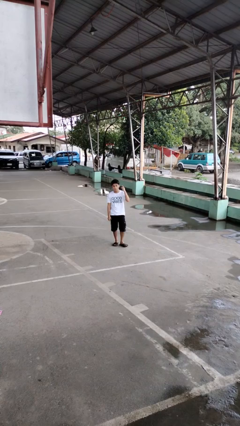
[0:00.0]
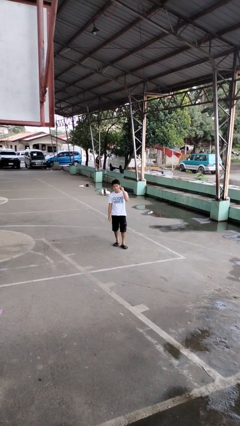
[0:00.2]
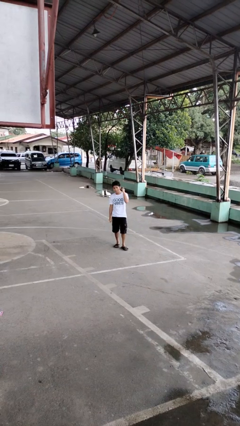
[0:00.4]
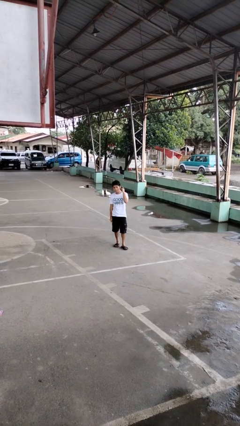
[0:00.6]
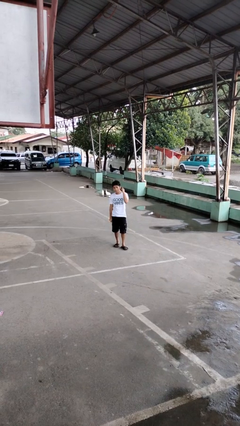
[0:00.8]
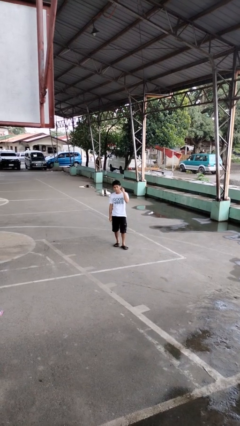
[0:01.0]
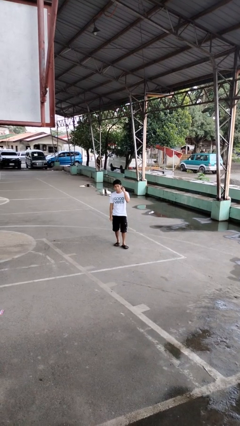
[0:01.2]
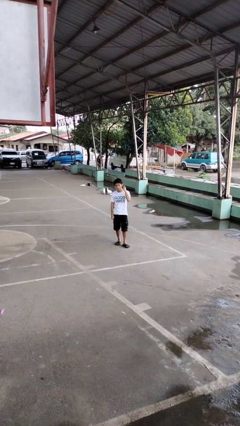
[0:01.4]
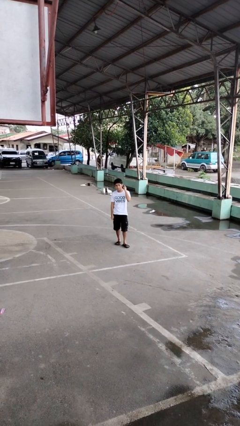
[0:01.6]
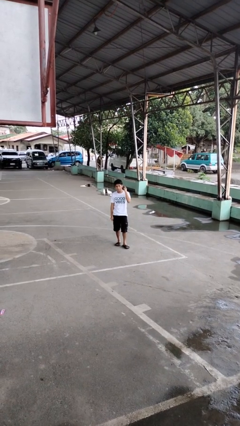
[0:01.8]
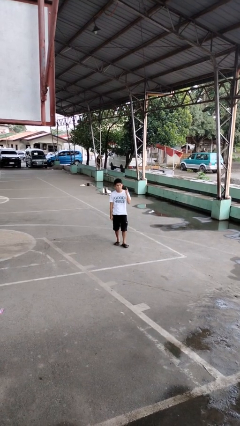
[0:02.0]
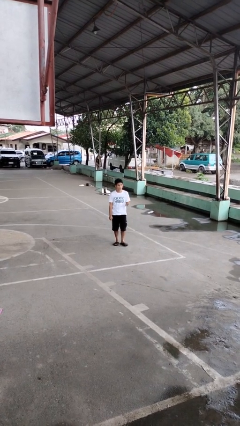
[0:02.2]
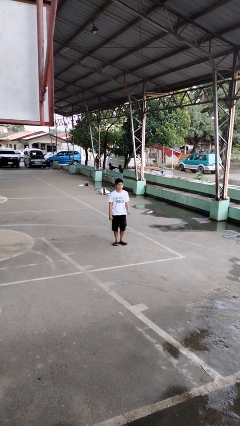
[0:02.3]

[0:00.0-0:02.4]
person gestures listen closely

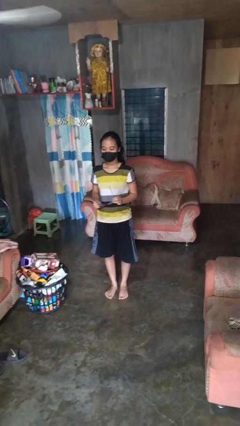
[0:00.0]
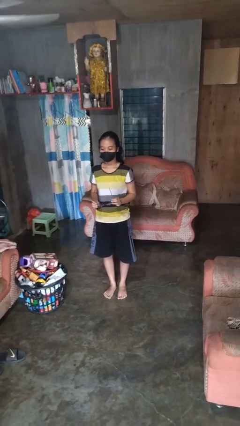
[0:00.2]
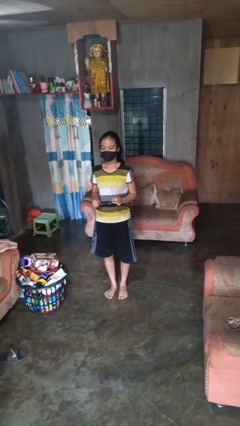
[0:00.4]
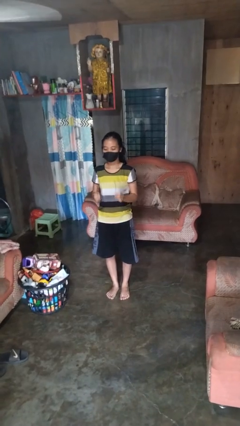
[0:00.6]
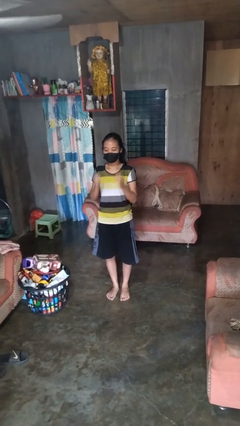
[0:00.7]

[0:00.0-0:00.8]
person puts on glasses

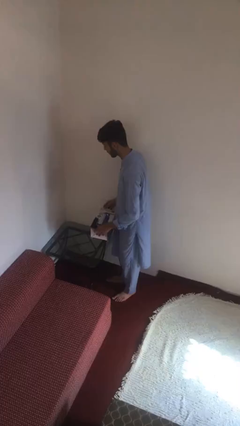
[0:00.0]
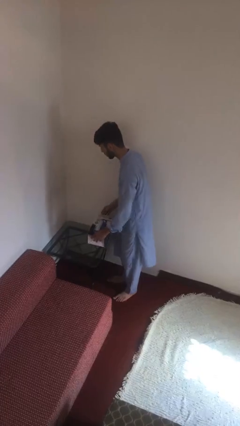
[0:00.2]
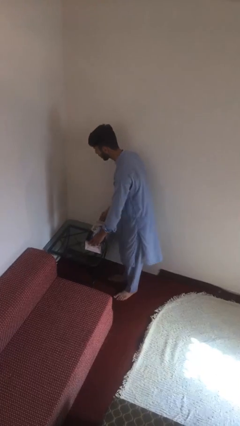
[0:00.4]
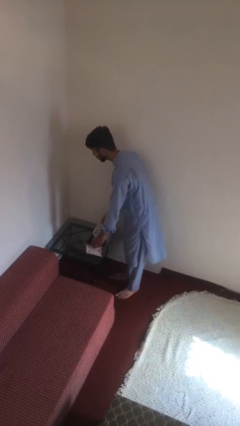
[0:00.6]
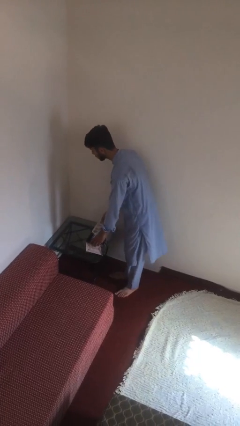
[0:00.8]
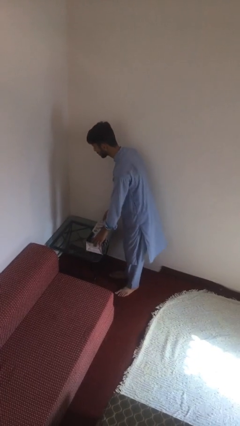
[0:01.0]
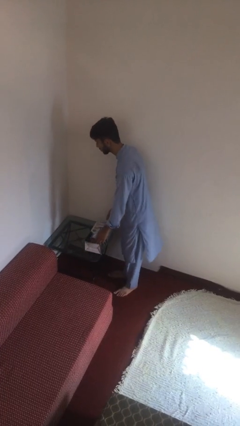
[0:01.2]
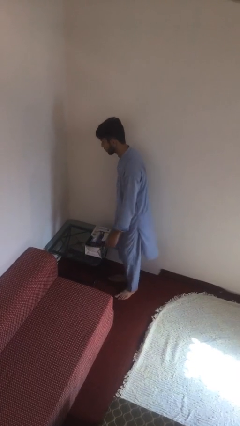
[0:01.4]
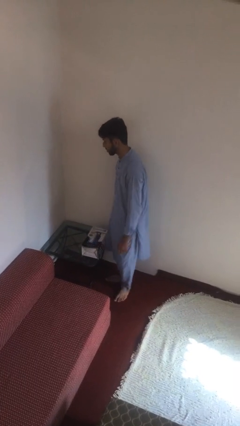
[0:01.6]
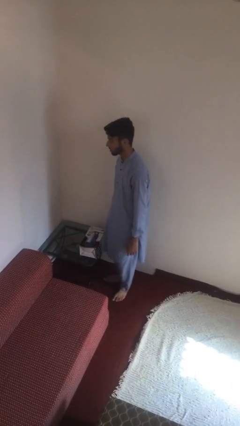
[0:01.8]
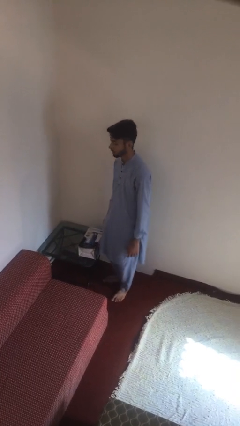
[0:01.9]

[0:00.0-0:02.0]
person puts down object on table

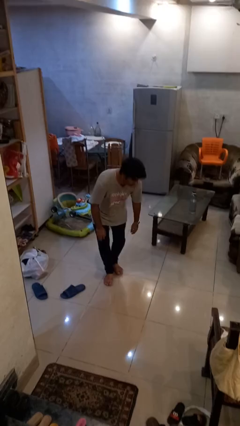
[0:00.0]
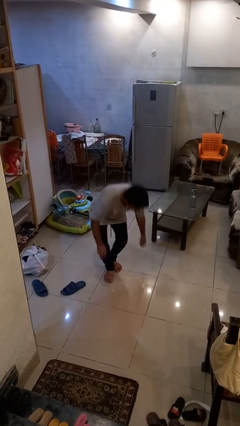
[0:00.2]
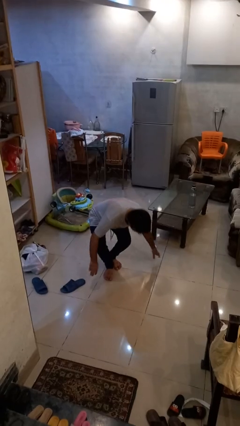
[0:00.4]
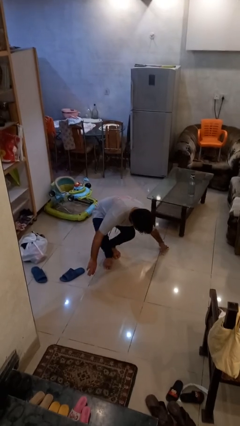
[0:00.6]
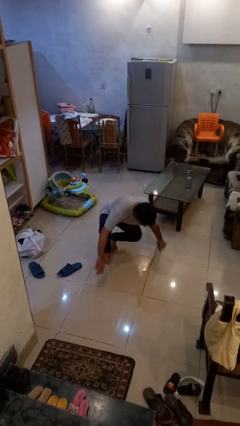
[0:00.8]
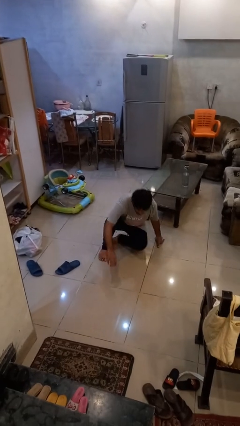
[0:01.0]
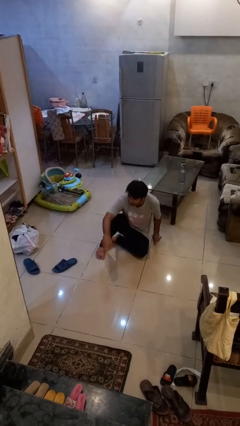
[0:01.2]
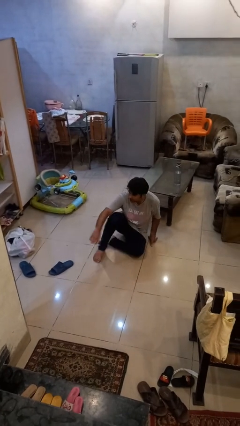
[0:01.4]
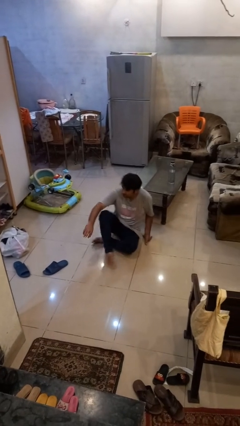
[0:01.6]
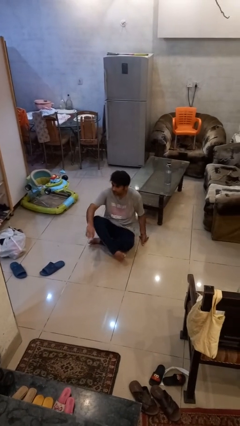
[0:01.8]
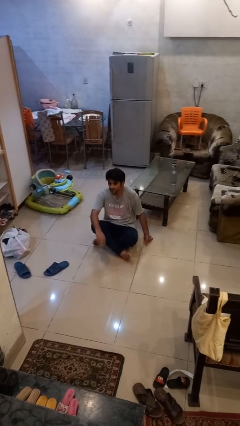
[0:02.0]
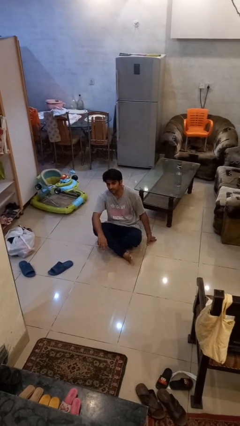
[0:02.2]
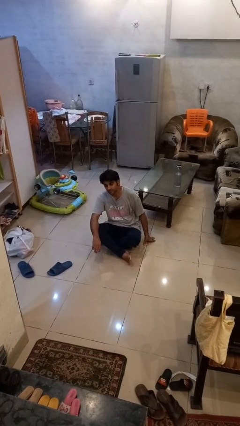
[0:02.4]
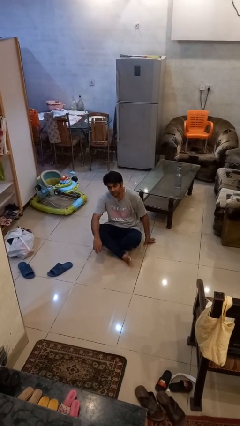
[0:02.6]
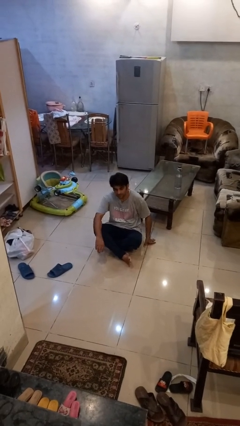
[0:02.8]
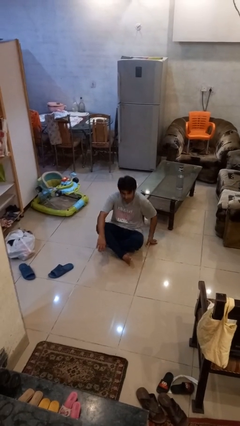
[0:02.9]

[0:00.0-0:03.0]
person sits crisscross

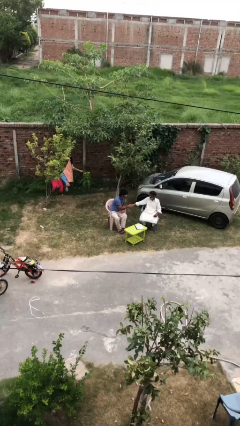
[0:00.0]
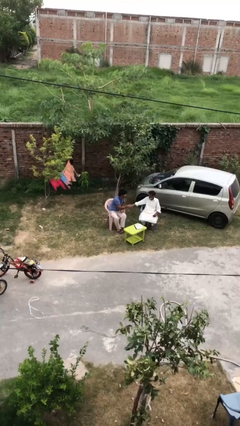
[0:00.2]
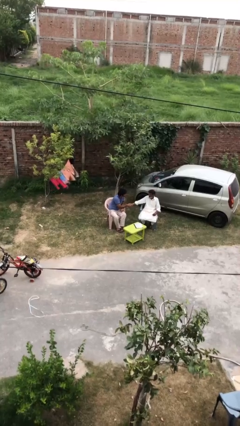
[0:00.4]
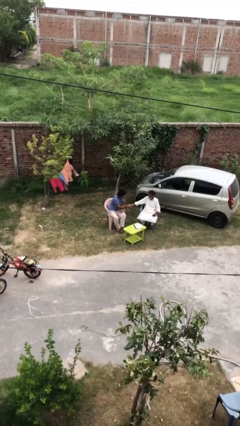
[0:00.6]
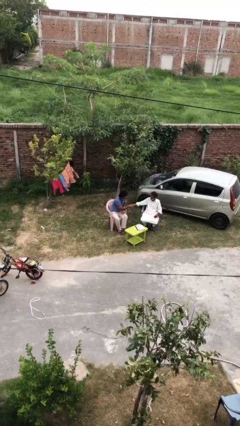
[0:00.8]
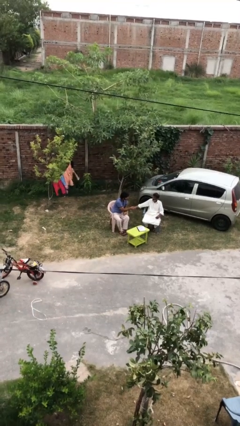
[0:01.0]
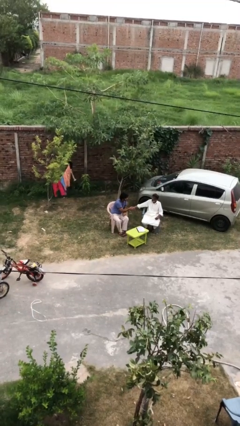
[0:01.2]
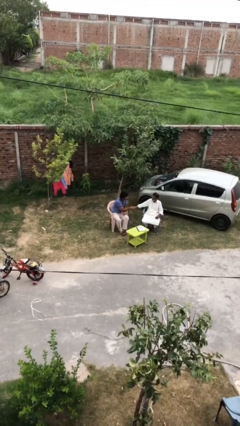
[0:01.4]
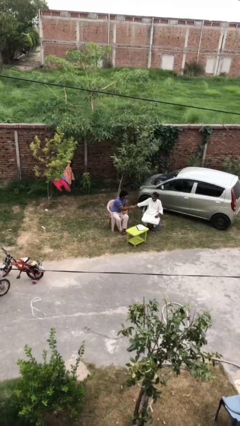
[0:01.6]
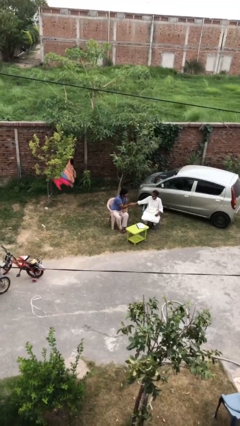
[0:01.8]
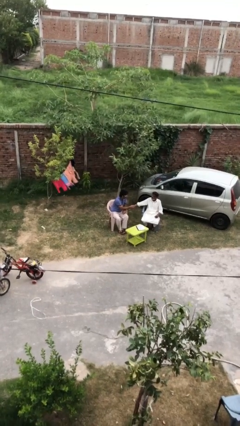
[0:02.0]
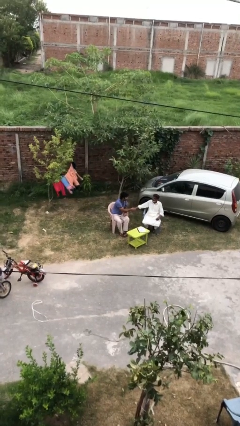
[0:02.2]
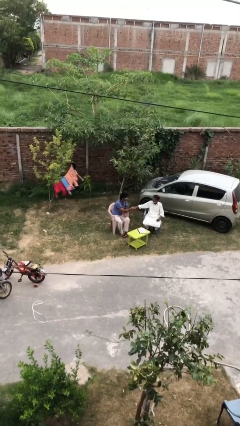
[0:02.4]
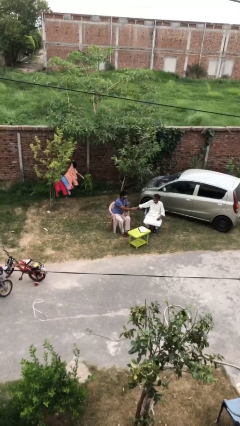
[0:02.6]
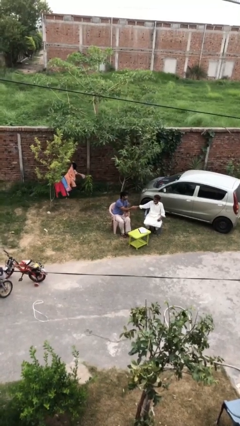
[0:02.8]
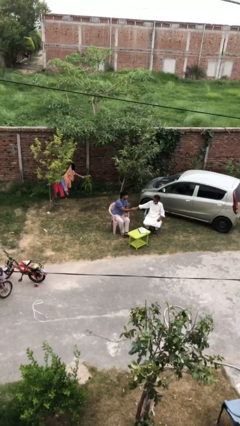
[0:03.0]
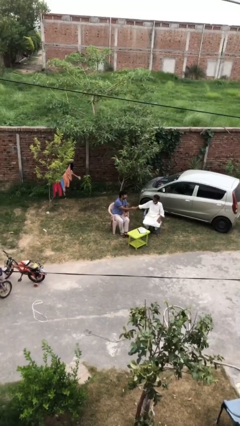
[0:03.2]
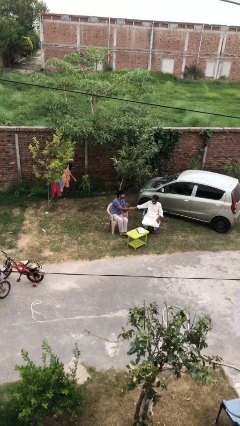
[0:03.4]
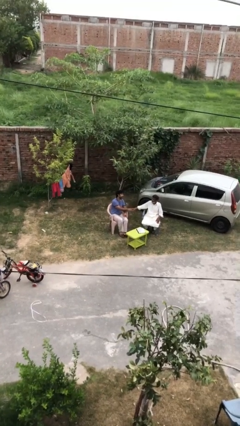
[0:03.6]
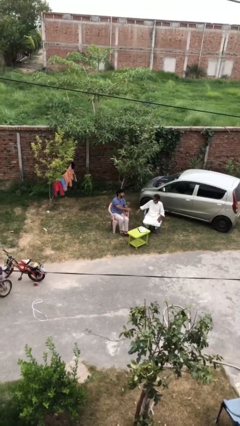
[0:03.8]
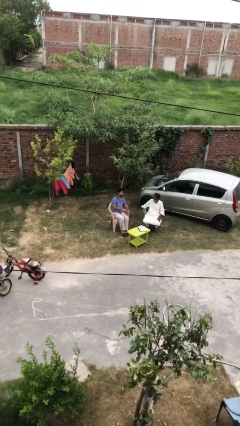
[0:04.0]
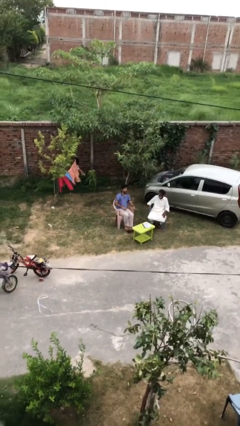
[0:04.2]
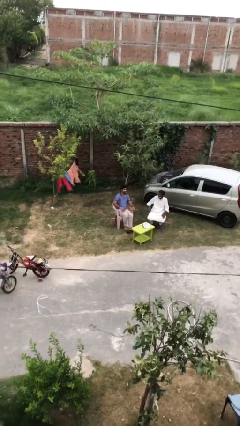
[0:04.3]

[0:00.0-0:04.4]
person shakes hand

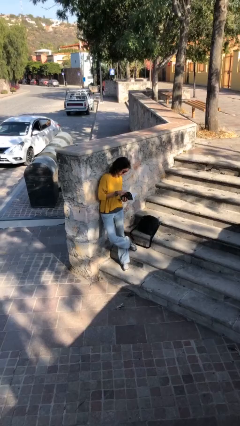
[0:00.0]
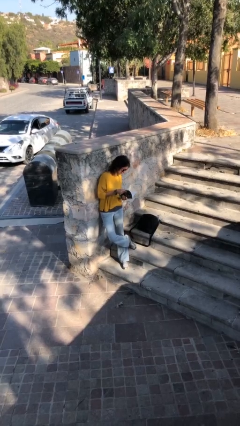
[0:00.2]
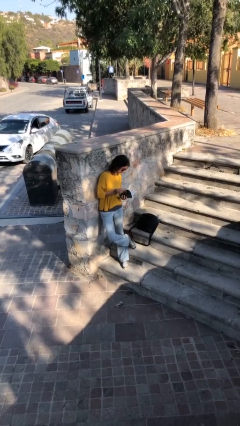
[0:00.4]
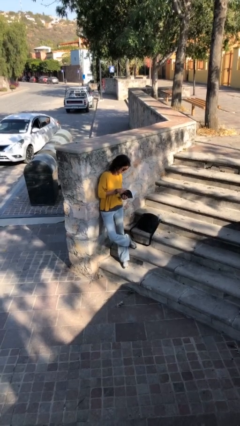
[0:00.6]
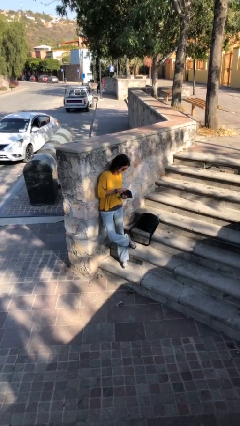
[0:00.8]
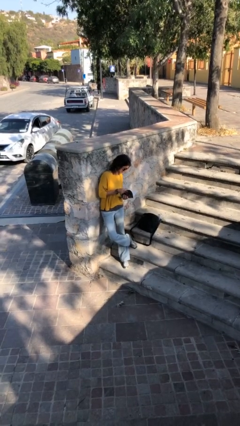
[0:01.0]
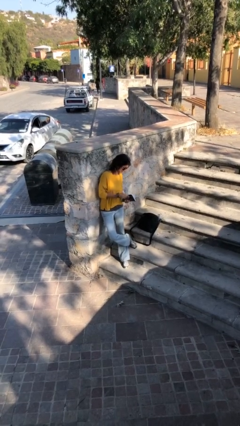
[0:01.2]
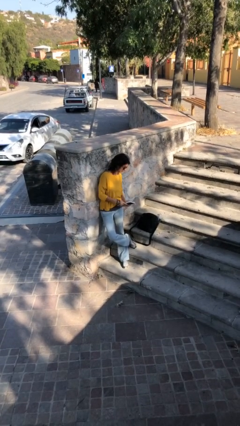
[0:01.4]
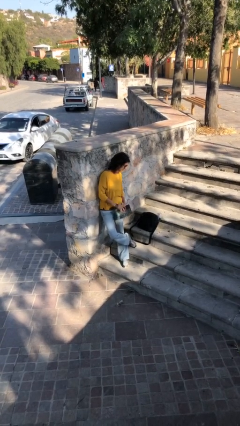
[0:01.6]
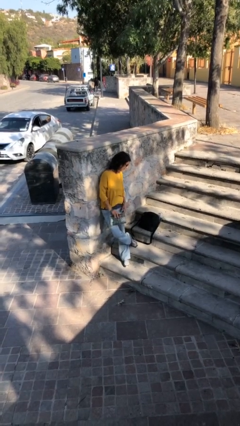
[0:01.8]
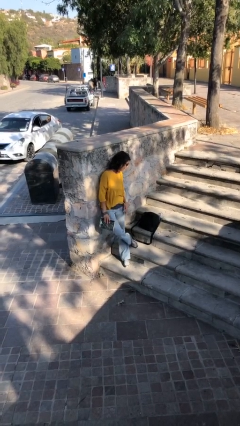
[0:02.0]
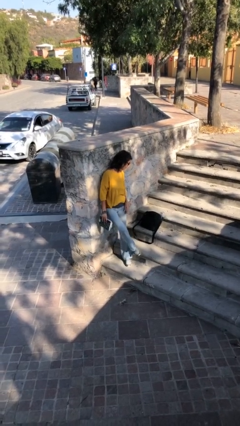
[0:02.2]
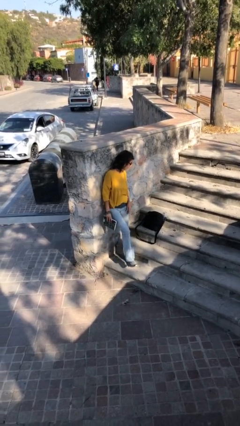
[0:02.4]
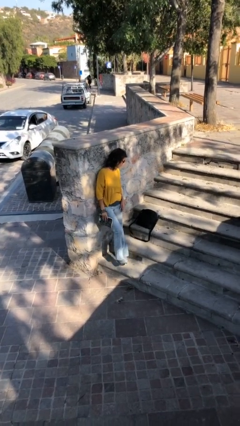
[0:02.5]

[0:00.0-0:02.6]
person reads document

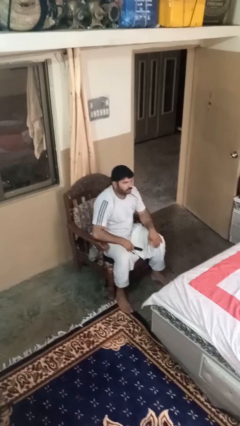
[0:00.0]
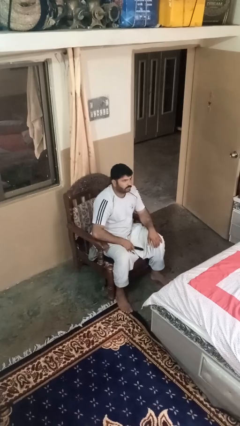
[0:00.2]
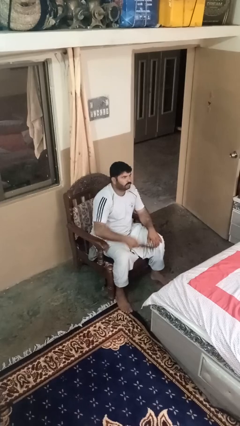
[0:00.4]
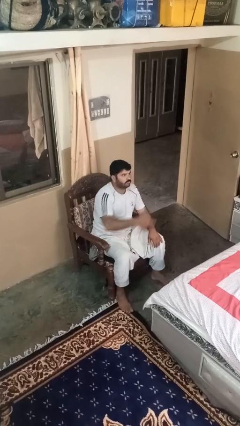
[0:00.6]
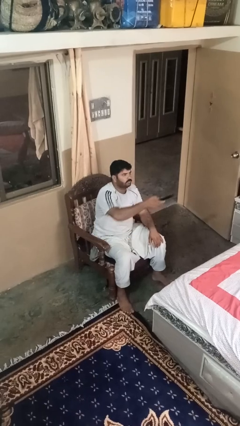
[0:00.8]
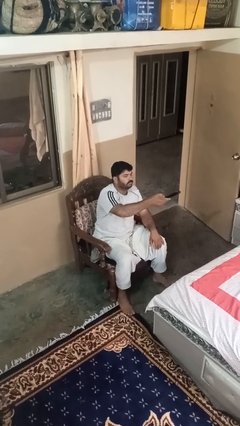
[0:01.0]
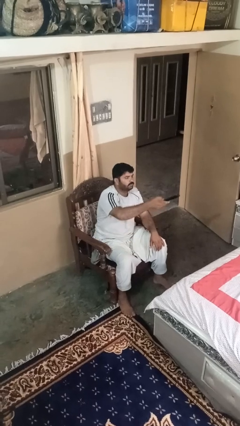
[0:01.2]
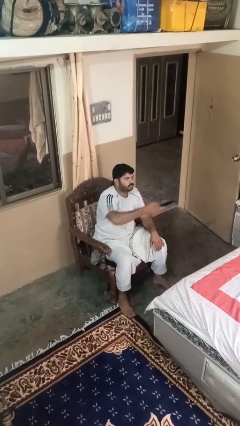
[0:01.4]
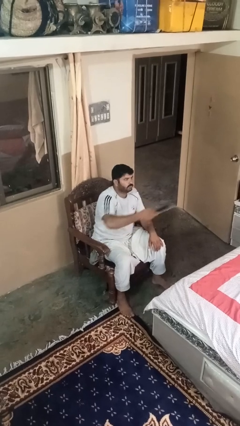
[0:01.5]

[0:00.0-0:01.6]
person uses television remote

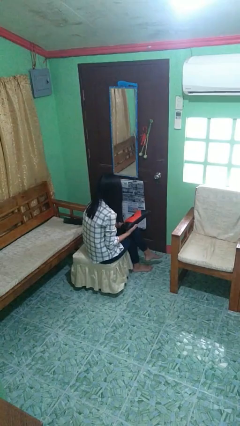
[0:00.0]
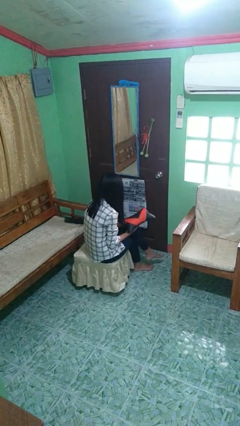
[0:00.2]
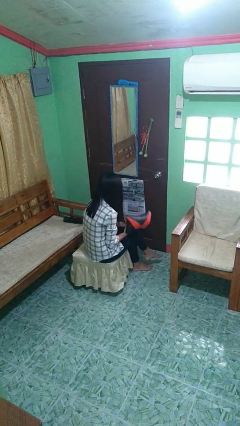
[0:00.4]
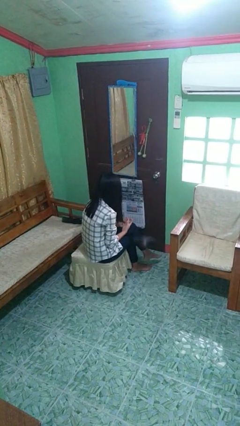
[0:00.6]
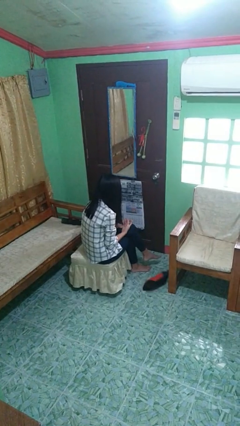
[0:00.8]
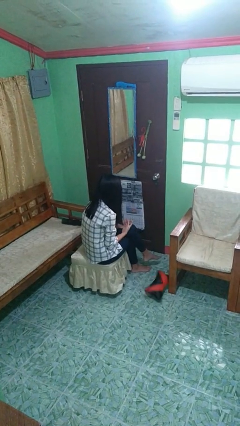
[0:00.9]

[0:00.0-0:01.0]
person drops object
